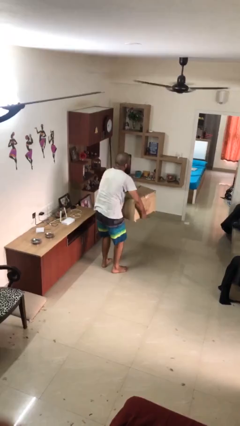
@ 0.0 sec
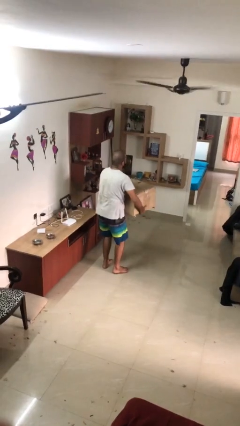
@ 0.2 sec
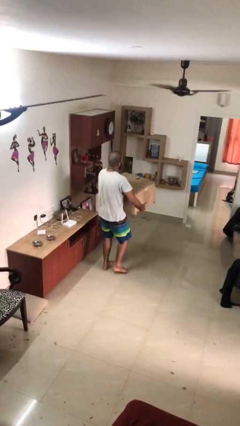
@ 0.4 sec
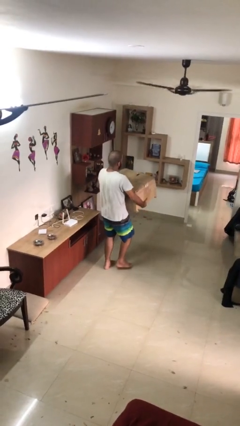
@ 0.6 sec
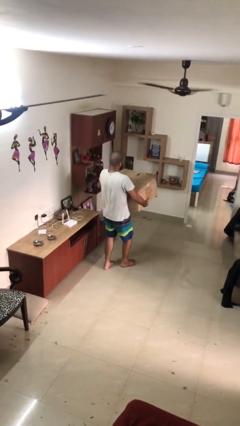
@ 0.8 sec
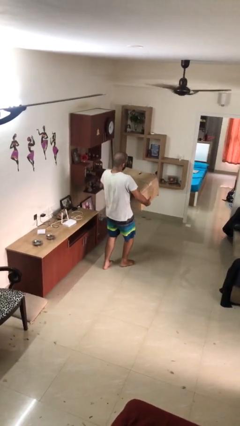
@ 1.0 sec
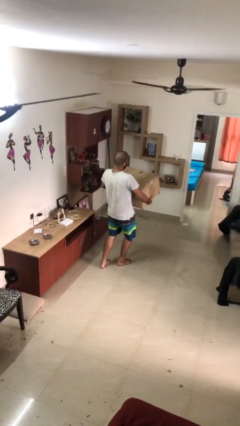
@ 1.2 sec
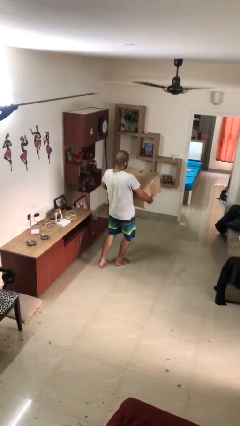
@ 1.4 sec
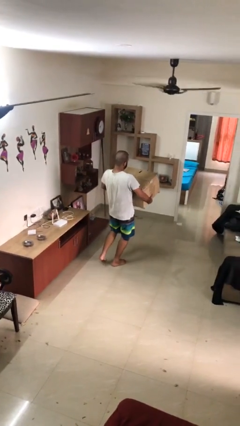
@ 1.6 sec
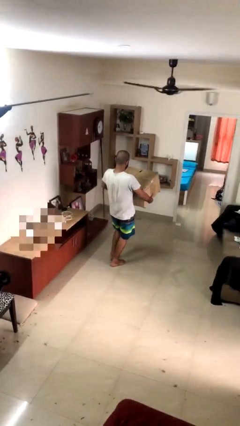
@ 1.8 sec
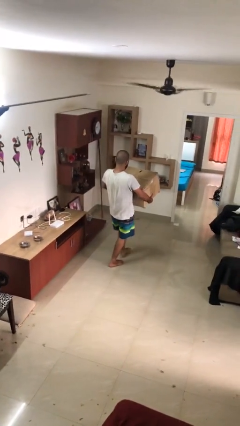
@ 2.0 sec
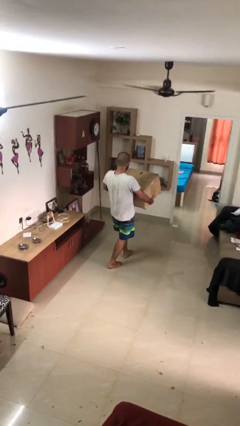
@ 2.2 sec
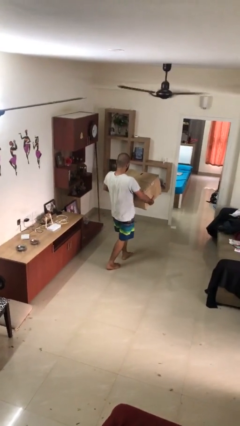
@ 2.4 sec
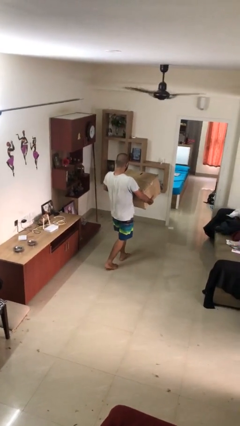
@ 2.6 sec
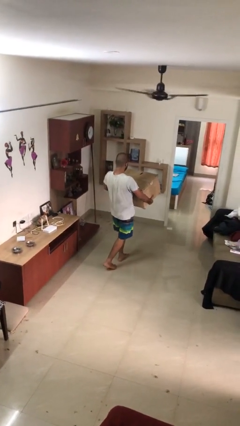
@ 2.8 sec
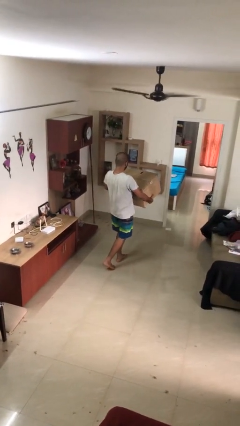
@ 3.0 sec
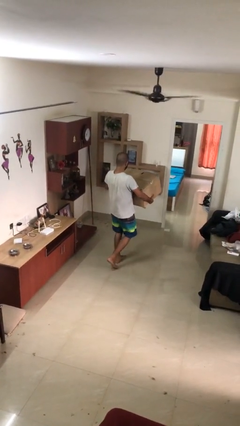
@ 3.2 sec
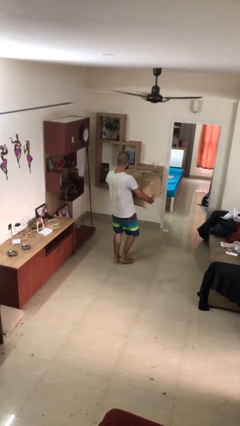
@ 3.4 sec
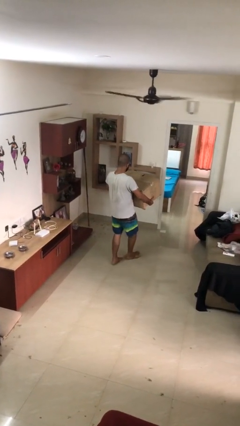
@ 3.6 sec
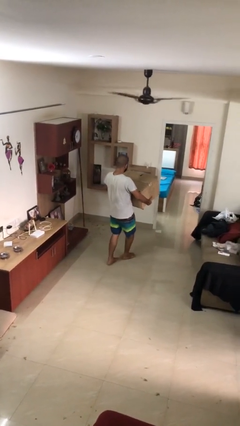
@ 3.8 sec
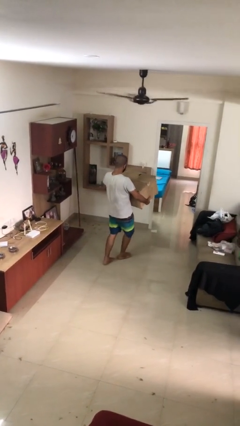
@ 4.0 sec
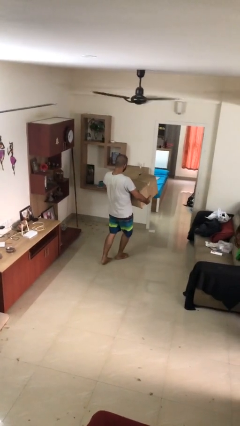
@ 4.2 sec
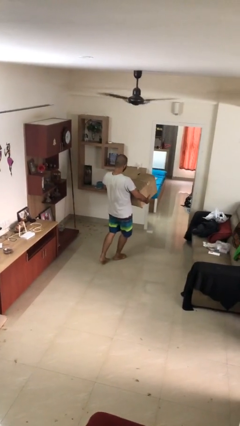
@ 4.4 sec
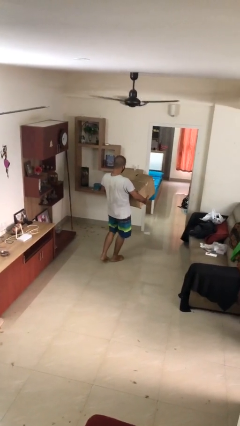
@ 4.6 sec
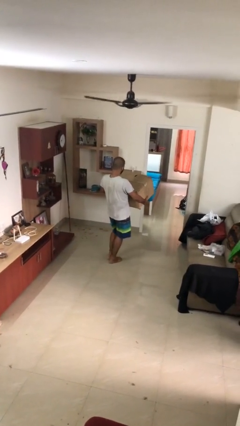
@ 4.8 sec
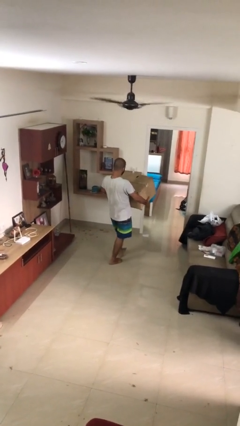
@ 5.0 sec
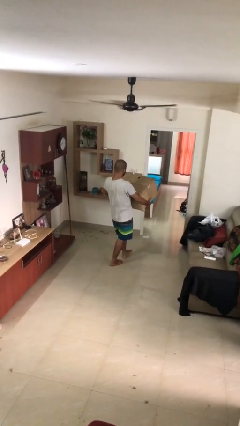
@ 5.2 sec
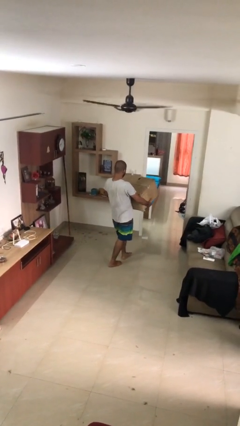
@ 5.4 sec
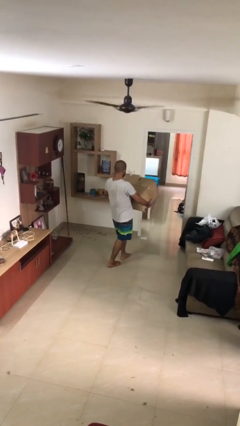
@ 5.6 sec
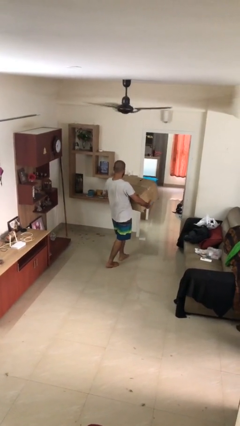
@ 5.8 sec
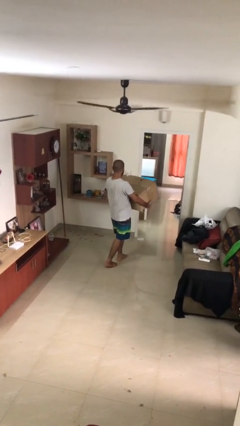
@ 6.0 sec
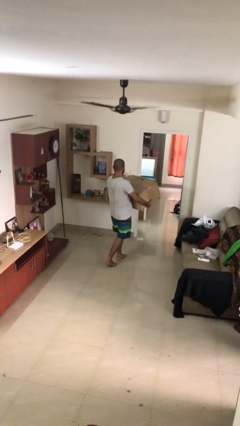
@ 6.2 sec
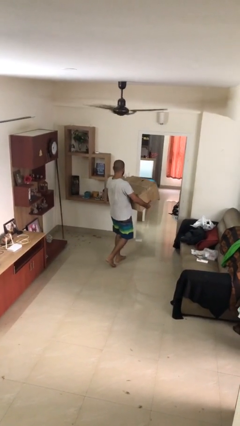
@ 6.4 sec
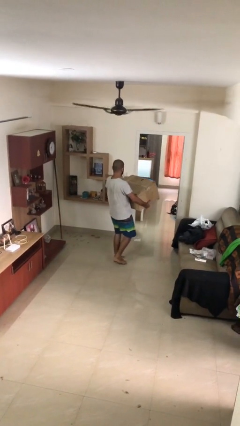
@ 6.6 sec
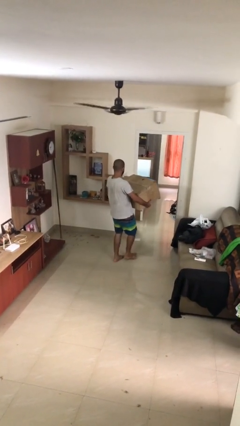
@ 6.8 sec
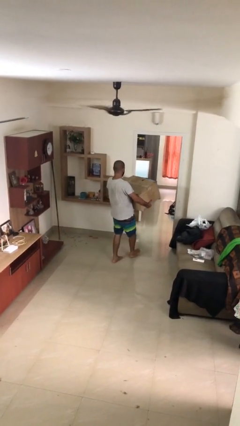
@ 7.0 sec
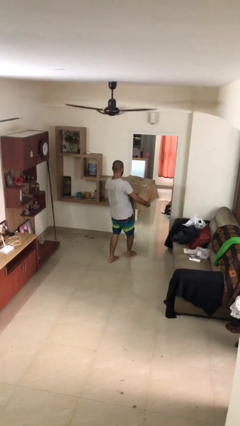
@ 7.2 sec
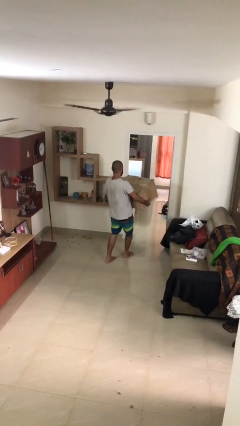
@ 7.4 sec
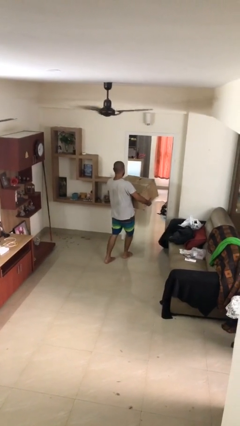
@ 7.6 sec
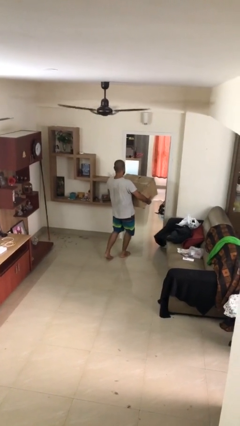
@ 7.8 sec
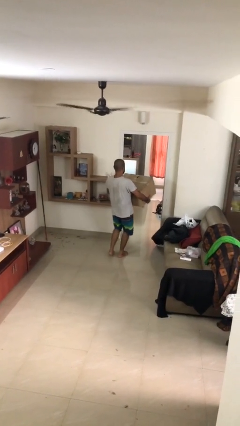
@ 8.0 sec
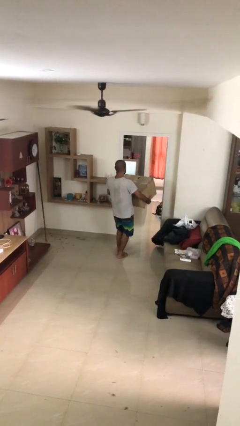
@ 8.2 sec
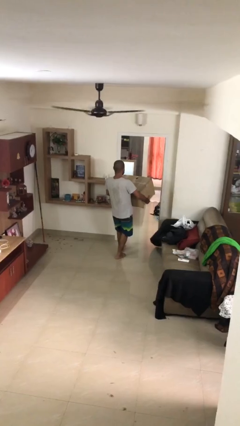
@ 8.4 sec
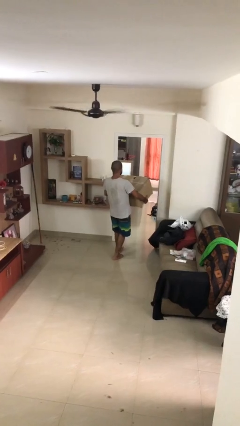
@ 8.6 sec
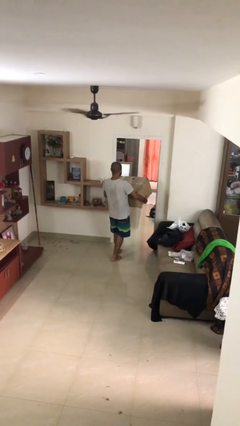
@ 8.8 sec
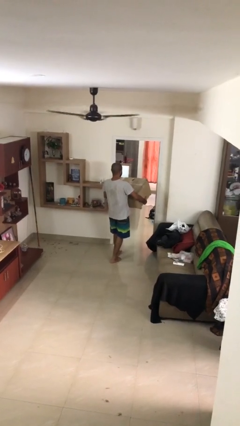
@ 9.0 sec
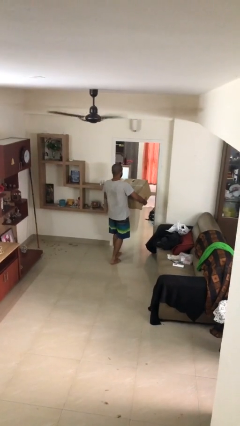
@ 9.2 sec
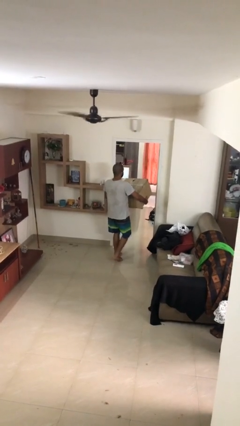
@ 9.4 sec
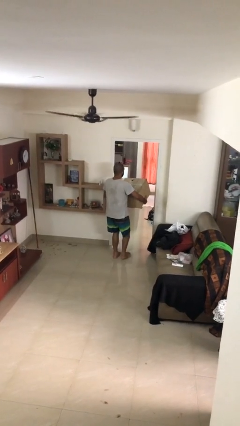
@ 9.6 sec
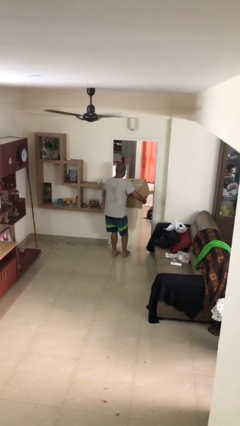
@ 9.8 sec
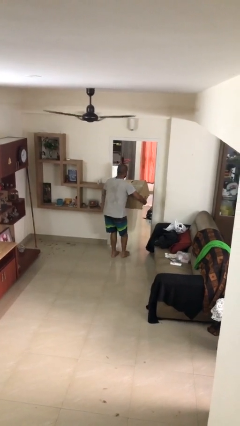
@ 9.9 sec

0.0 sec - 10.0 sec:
person carries heavy object

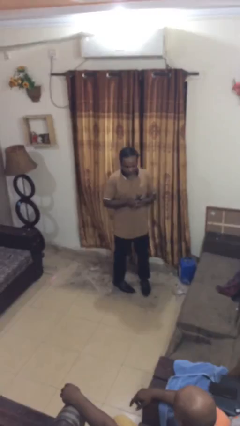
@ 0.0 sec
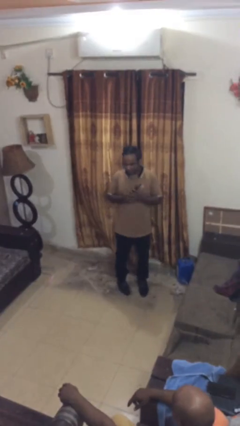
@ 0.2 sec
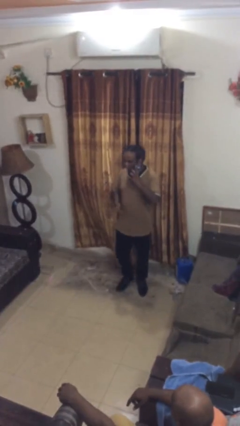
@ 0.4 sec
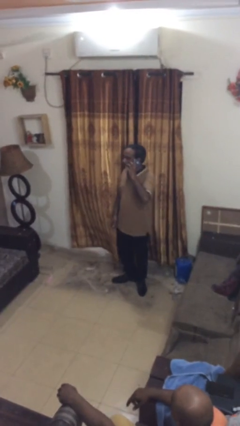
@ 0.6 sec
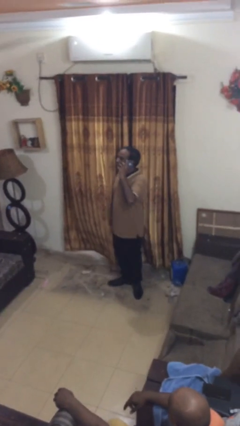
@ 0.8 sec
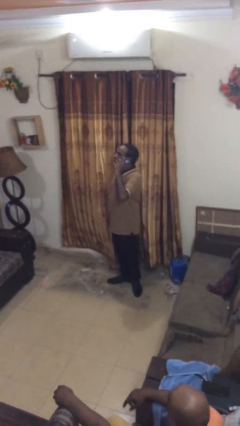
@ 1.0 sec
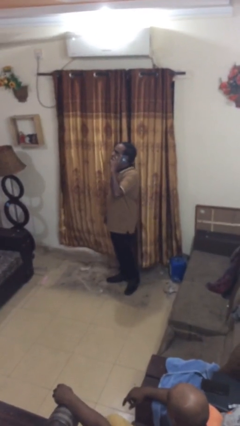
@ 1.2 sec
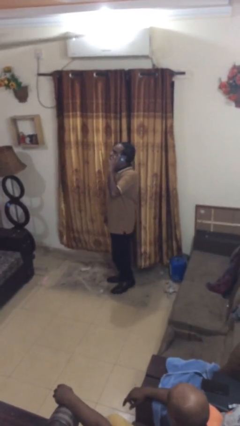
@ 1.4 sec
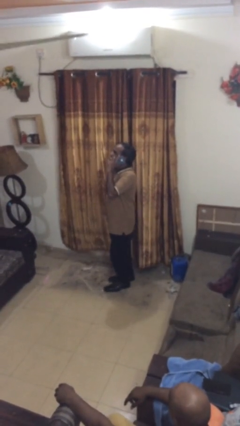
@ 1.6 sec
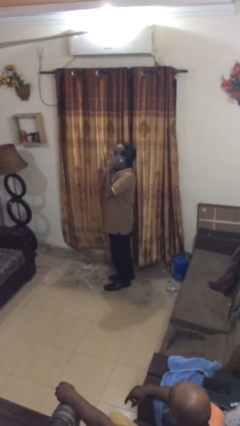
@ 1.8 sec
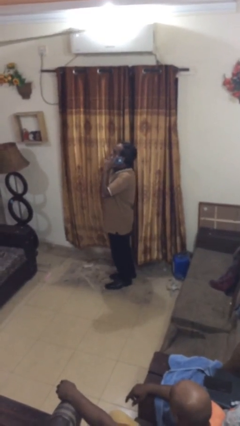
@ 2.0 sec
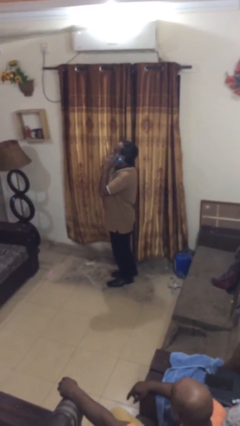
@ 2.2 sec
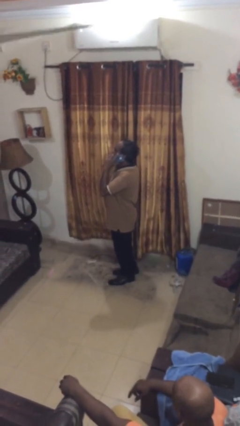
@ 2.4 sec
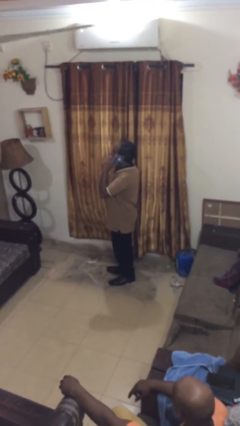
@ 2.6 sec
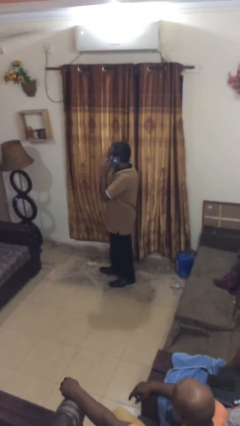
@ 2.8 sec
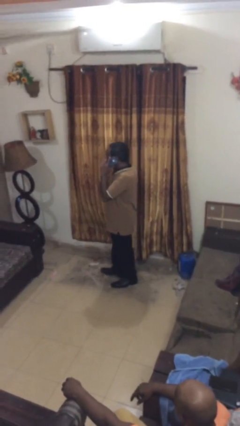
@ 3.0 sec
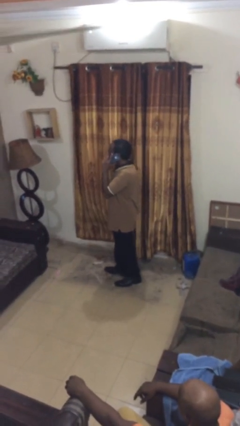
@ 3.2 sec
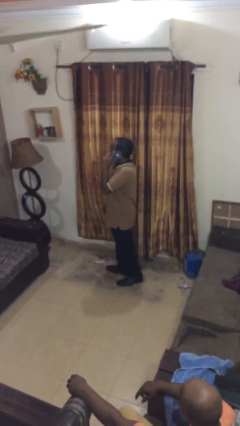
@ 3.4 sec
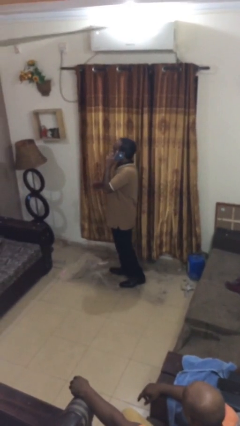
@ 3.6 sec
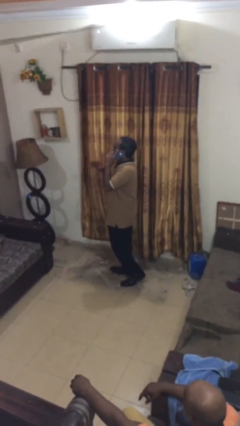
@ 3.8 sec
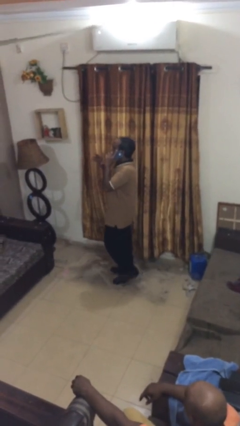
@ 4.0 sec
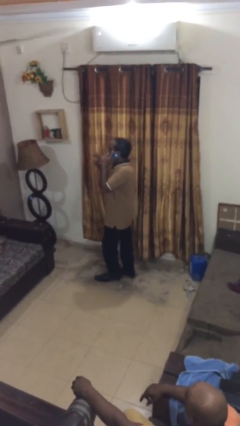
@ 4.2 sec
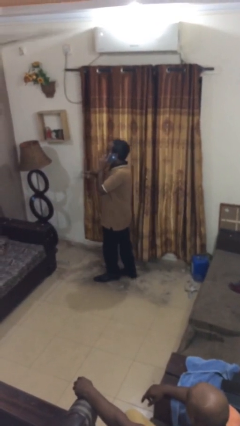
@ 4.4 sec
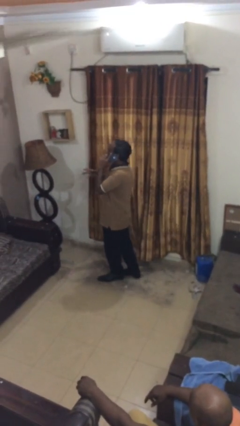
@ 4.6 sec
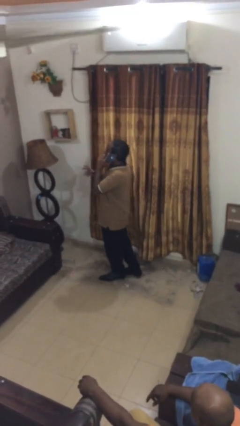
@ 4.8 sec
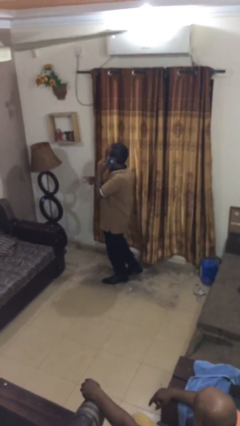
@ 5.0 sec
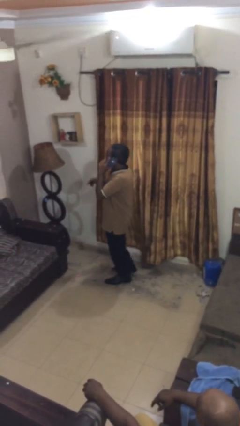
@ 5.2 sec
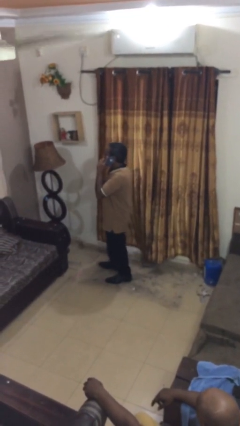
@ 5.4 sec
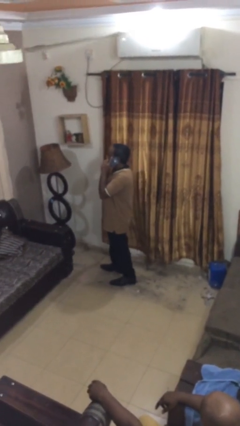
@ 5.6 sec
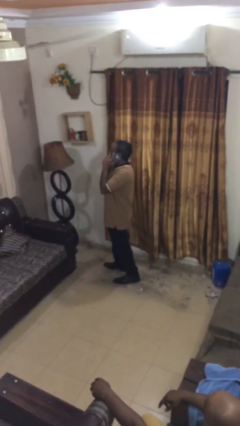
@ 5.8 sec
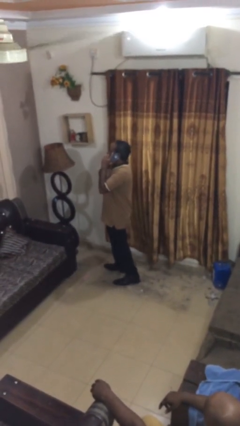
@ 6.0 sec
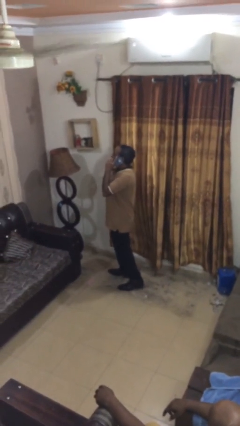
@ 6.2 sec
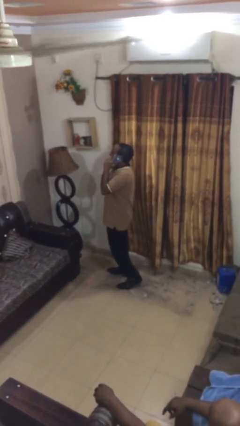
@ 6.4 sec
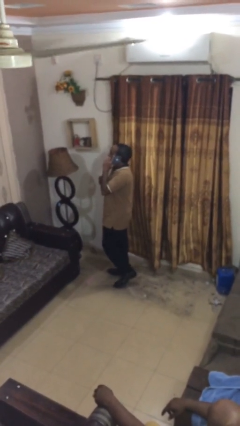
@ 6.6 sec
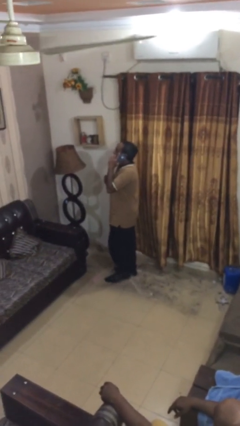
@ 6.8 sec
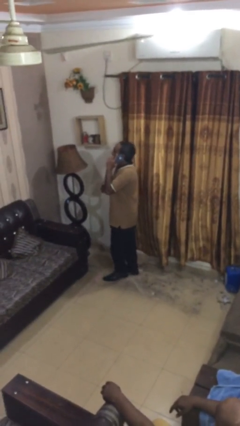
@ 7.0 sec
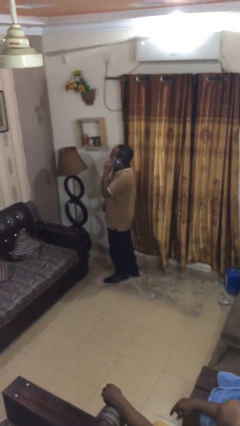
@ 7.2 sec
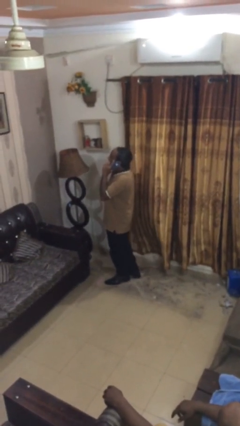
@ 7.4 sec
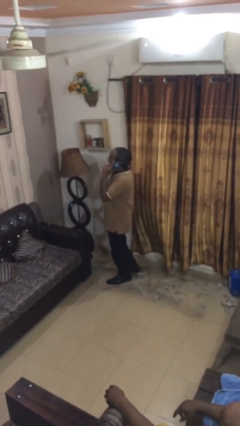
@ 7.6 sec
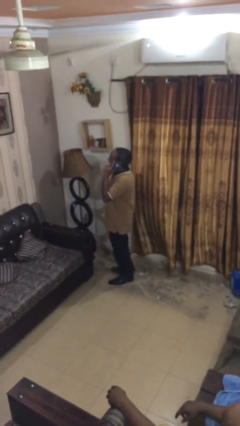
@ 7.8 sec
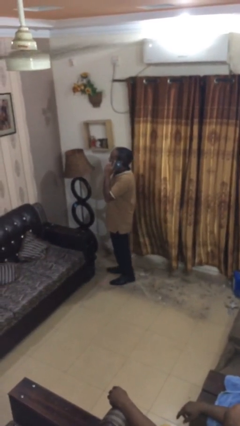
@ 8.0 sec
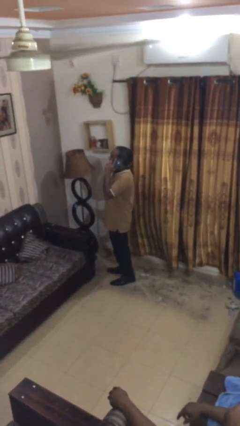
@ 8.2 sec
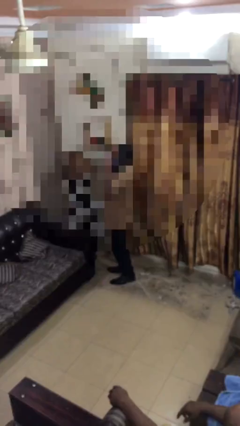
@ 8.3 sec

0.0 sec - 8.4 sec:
person talks on phone

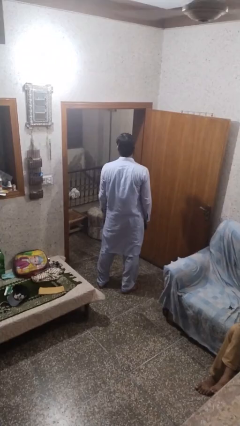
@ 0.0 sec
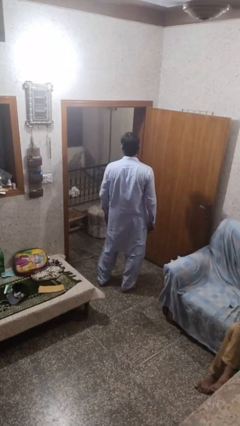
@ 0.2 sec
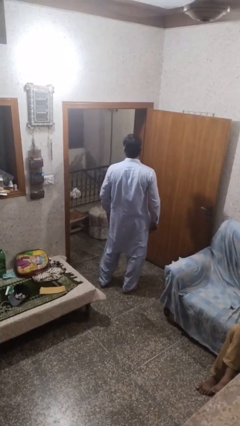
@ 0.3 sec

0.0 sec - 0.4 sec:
person crosses arms
